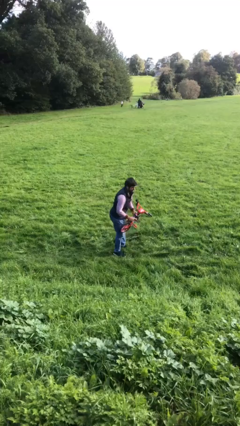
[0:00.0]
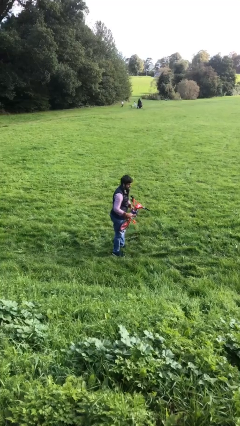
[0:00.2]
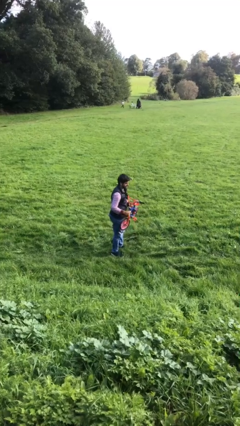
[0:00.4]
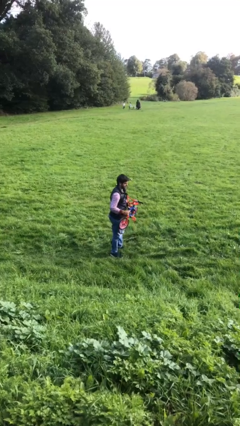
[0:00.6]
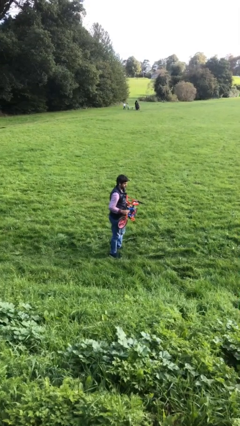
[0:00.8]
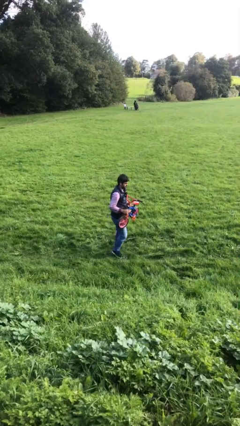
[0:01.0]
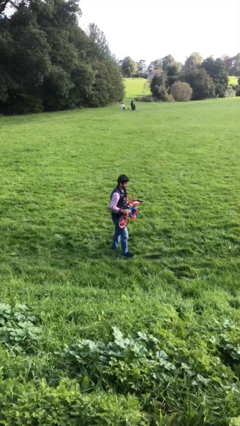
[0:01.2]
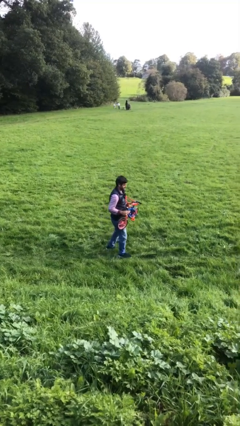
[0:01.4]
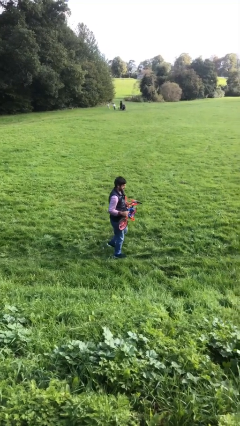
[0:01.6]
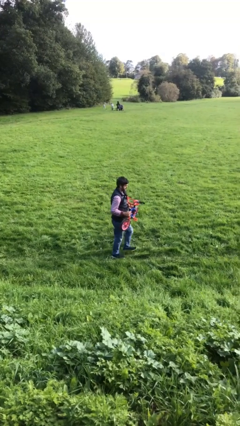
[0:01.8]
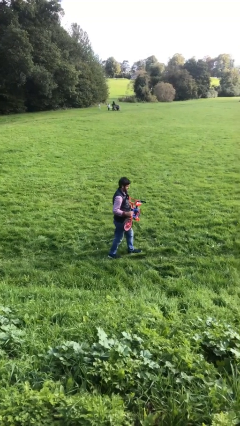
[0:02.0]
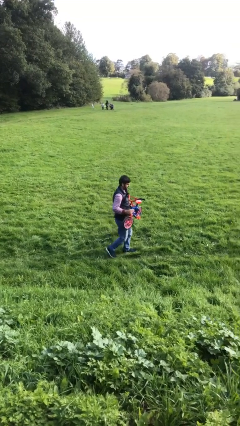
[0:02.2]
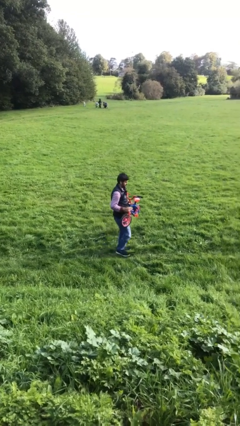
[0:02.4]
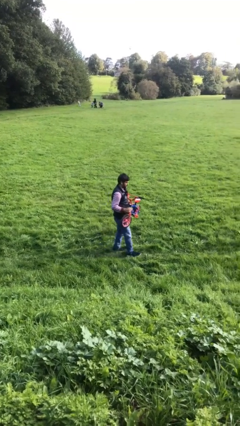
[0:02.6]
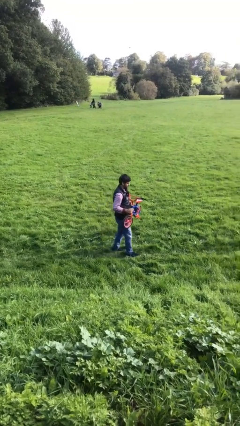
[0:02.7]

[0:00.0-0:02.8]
person carries heavy object

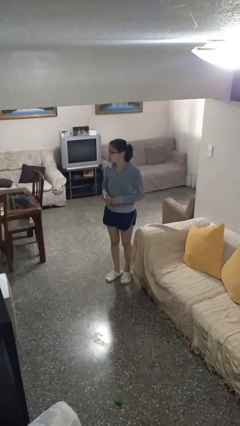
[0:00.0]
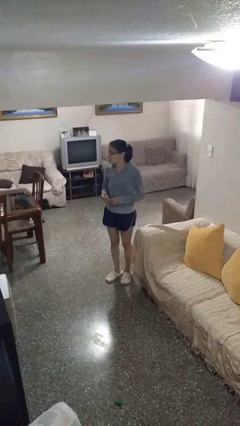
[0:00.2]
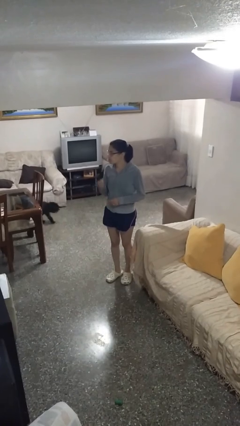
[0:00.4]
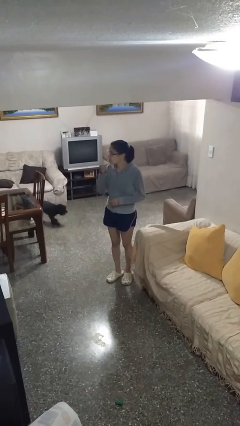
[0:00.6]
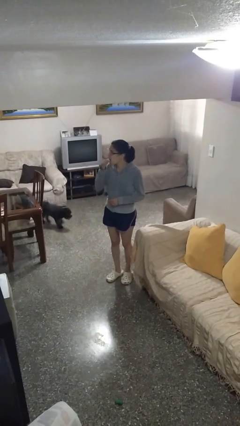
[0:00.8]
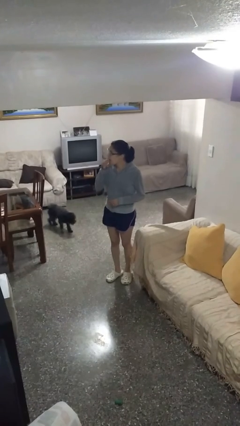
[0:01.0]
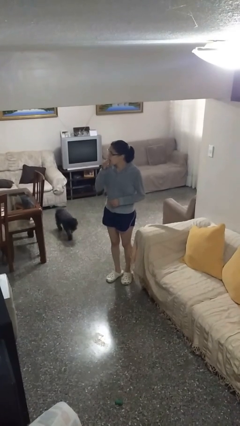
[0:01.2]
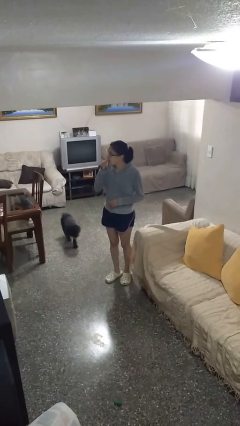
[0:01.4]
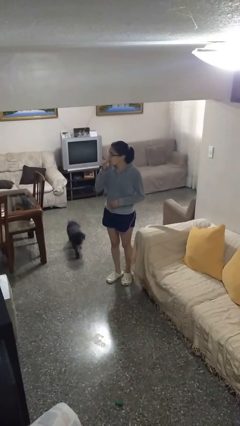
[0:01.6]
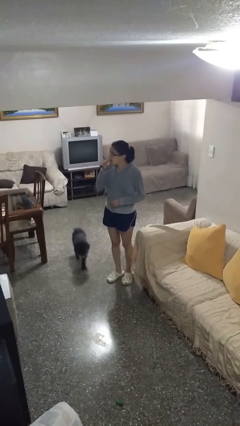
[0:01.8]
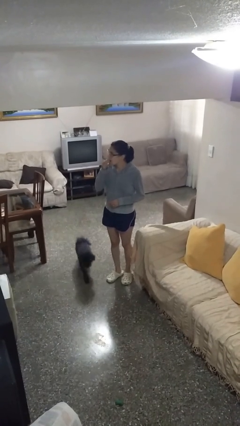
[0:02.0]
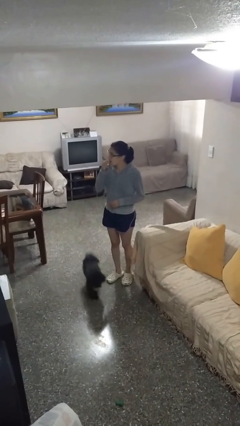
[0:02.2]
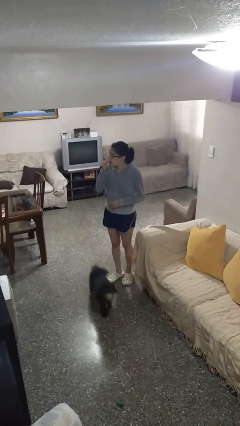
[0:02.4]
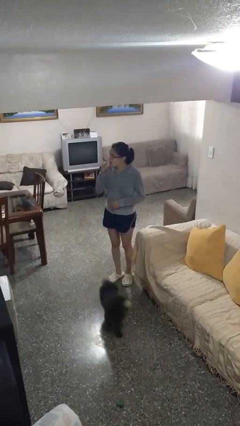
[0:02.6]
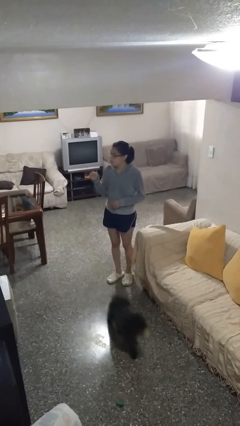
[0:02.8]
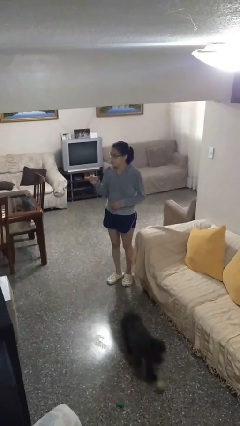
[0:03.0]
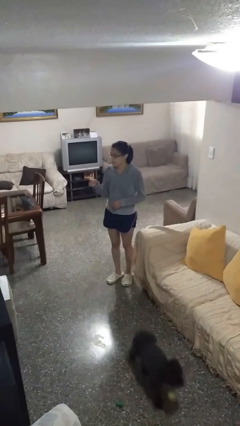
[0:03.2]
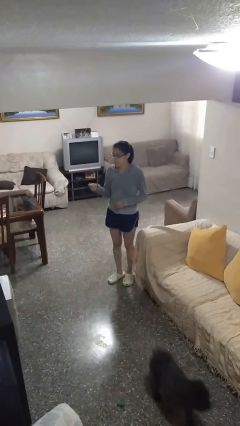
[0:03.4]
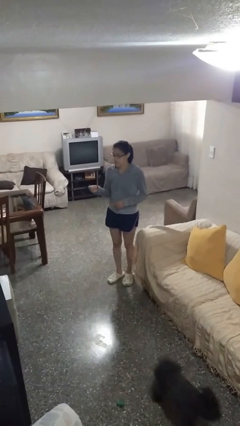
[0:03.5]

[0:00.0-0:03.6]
person flosses

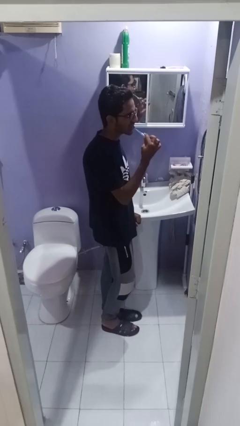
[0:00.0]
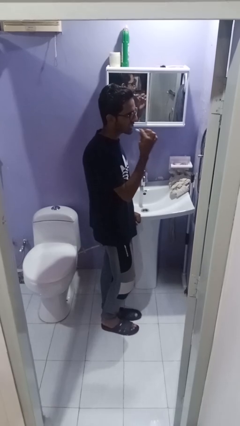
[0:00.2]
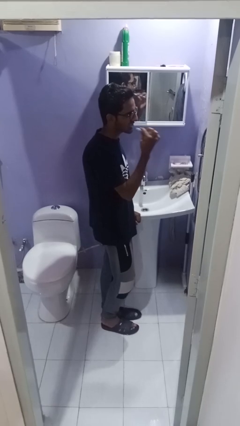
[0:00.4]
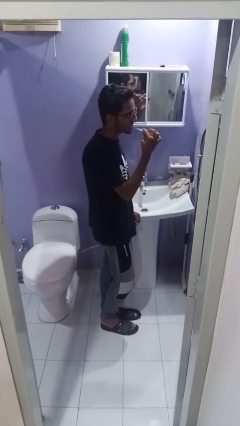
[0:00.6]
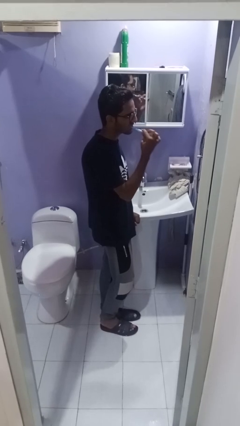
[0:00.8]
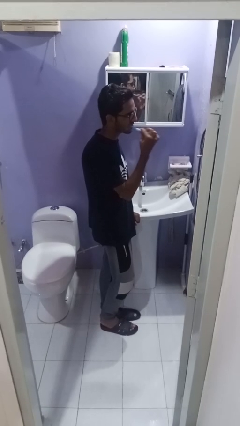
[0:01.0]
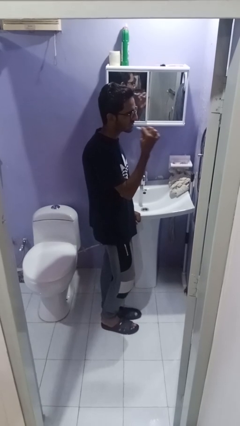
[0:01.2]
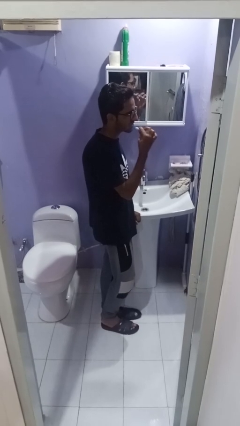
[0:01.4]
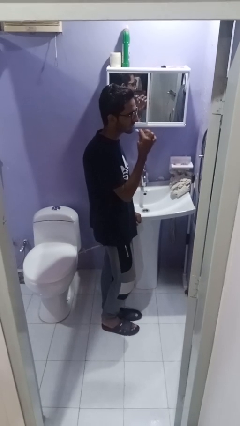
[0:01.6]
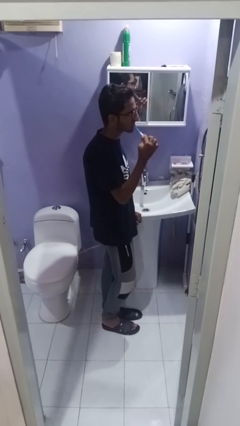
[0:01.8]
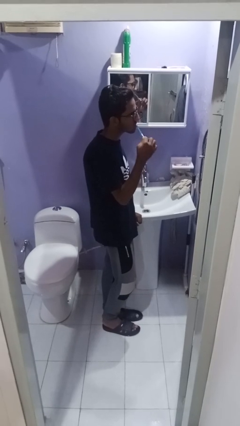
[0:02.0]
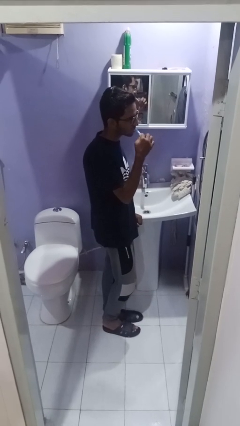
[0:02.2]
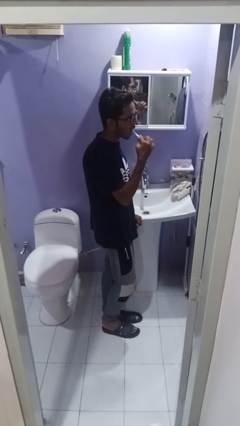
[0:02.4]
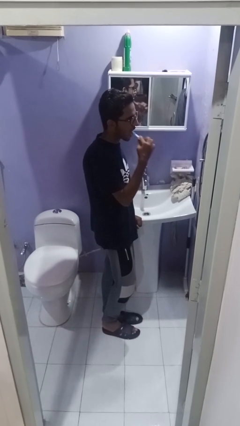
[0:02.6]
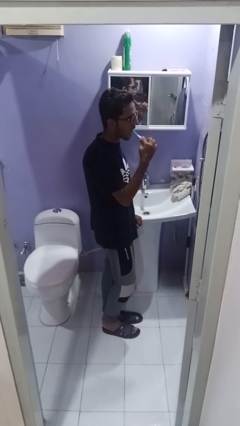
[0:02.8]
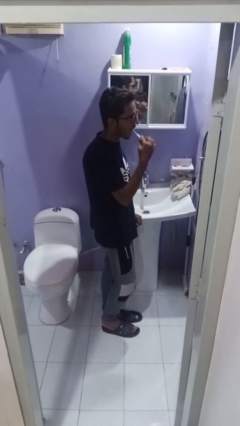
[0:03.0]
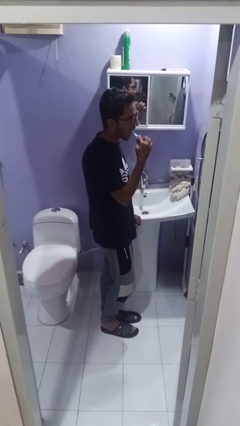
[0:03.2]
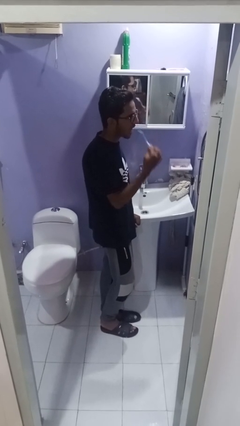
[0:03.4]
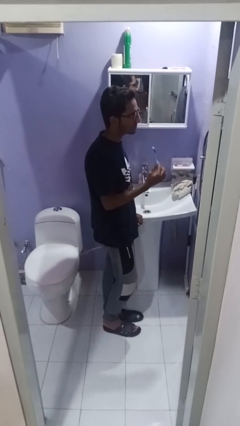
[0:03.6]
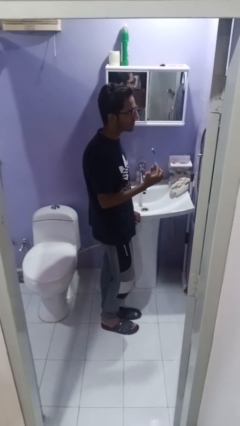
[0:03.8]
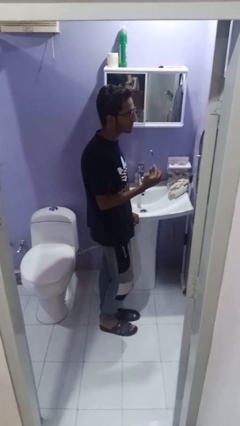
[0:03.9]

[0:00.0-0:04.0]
person brushes teeth

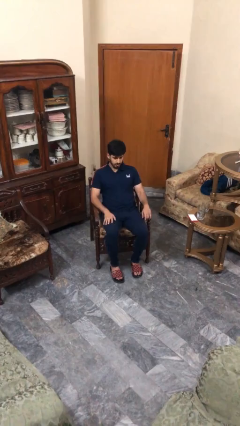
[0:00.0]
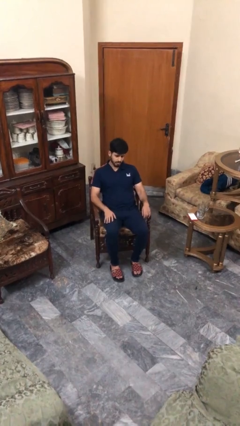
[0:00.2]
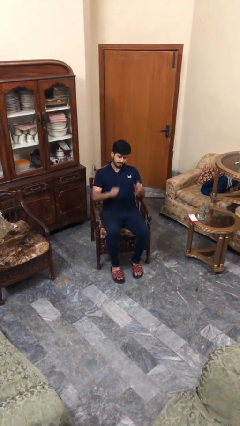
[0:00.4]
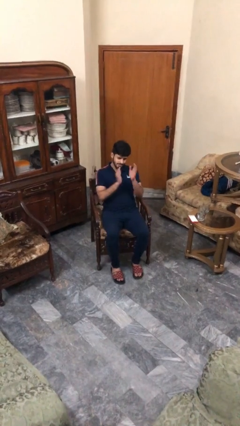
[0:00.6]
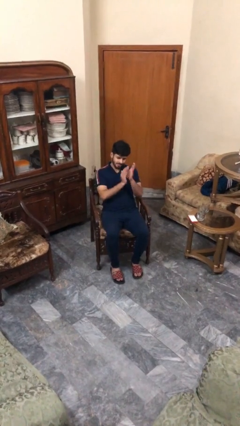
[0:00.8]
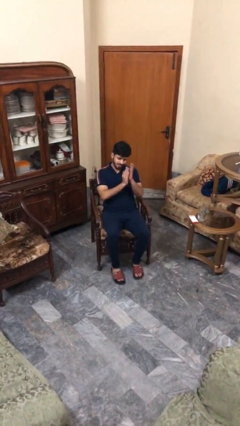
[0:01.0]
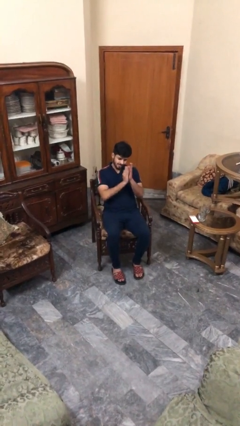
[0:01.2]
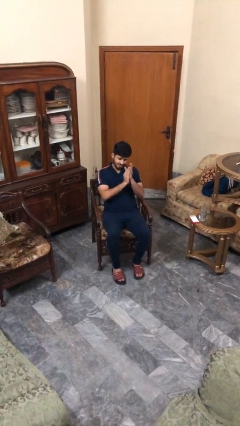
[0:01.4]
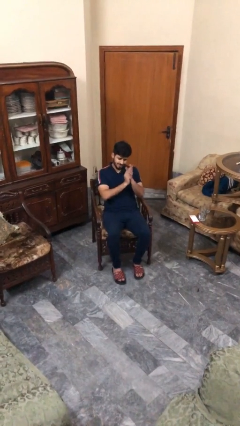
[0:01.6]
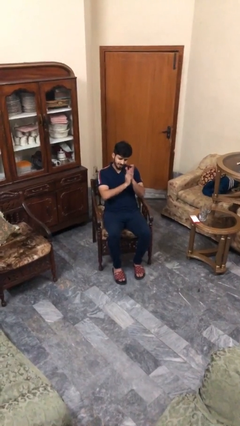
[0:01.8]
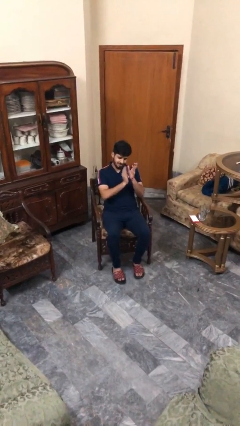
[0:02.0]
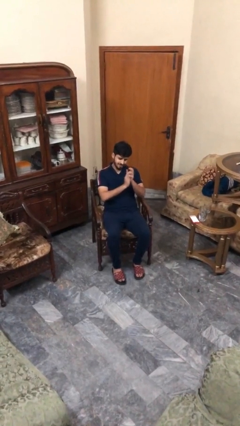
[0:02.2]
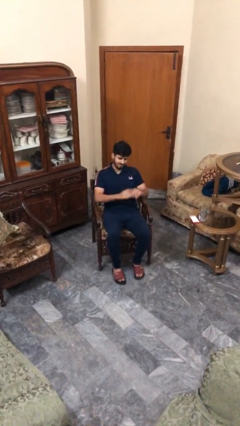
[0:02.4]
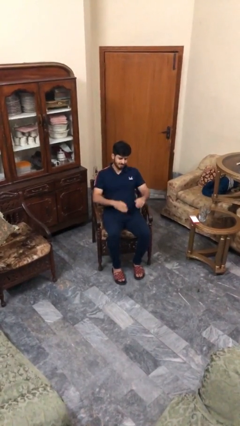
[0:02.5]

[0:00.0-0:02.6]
person claps hands

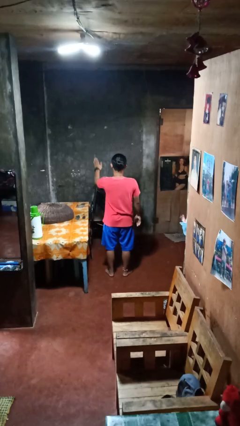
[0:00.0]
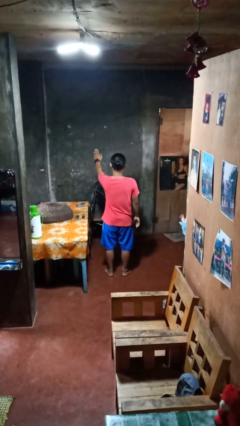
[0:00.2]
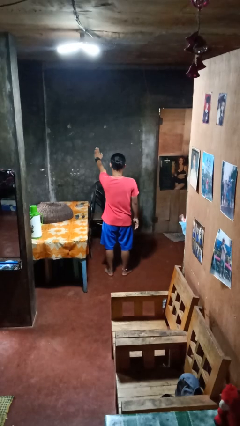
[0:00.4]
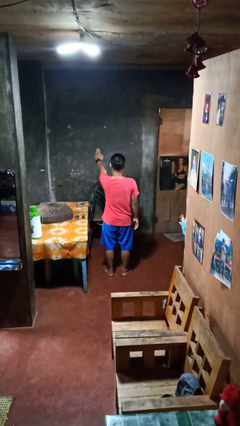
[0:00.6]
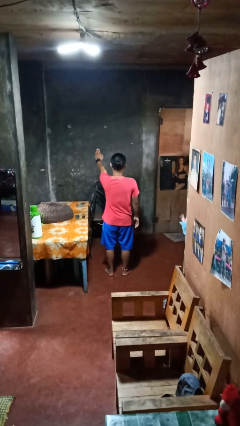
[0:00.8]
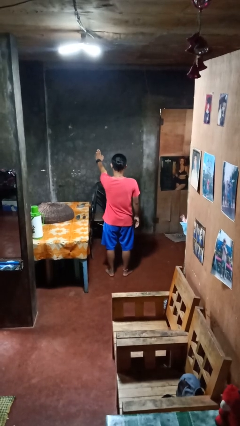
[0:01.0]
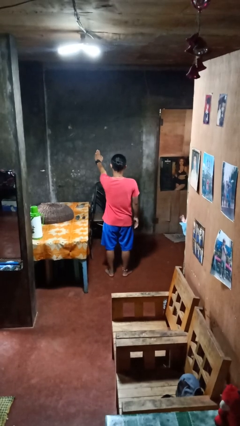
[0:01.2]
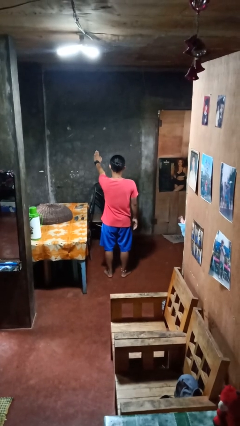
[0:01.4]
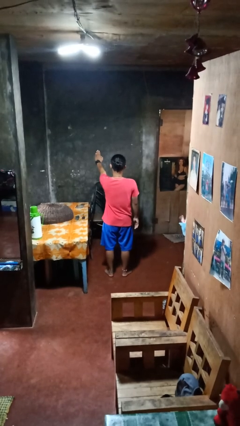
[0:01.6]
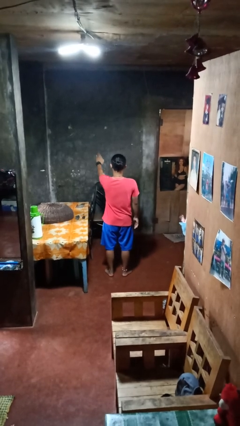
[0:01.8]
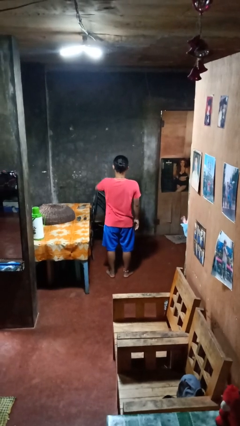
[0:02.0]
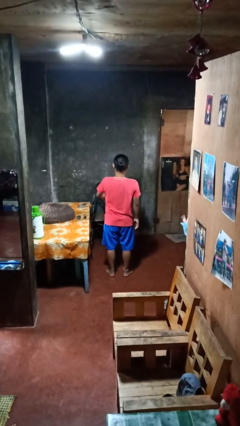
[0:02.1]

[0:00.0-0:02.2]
person gestures stop

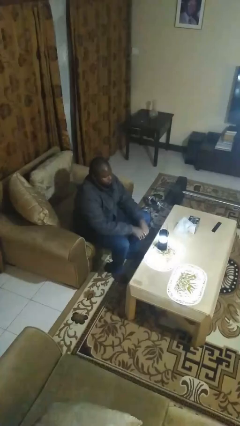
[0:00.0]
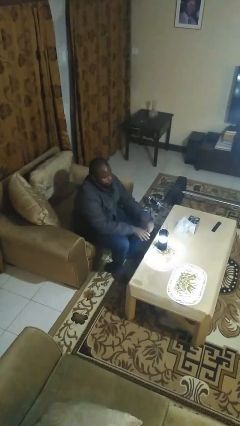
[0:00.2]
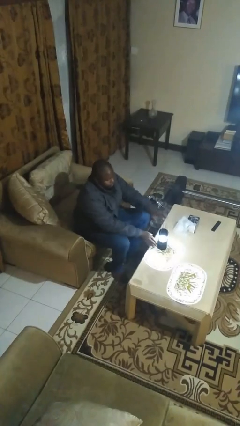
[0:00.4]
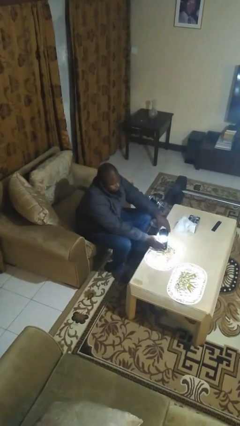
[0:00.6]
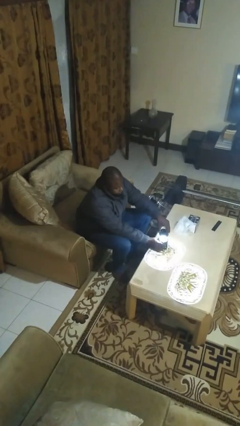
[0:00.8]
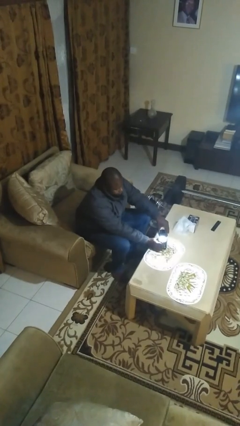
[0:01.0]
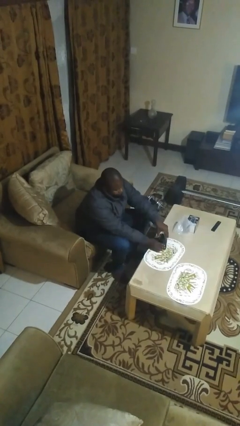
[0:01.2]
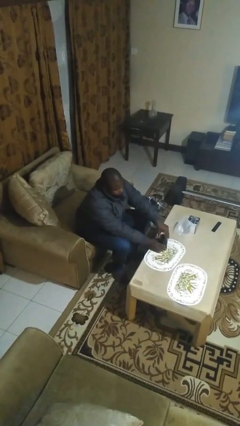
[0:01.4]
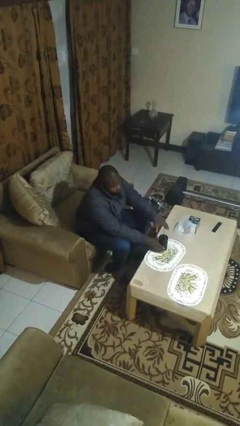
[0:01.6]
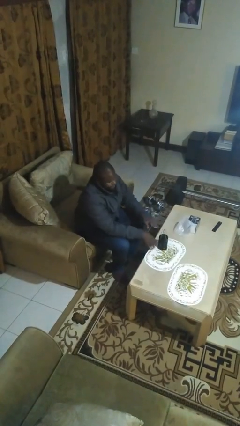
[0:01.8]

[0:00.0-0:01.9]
person turns off lamp

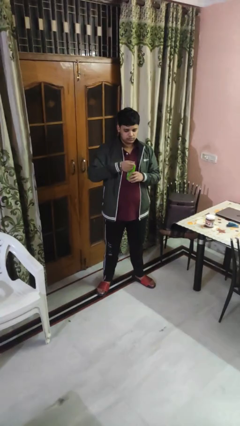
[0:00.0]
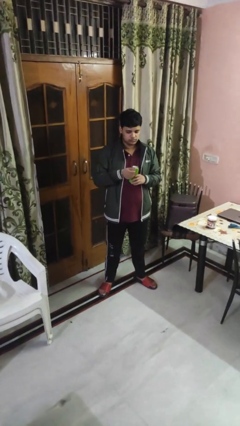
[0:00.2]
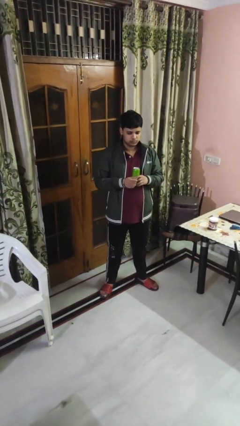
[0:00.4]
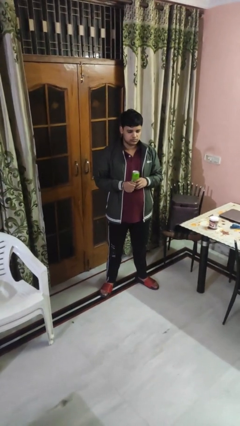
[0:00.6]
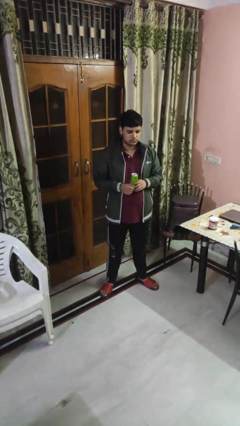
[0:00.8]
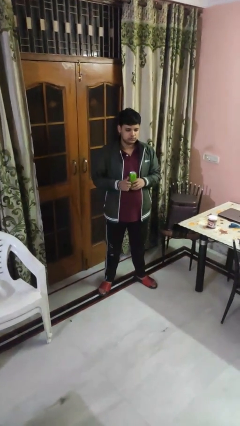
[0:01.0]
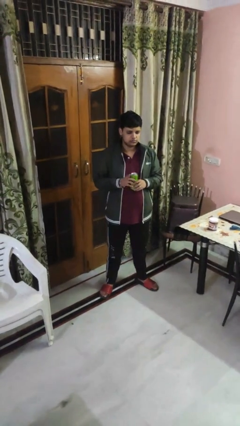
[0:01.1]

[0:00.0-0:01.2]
person opens beverage can
